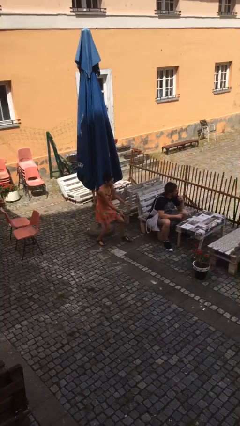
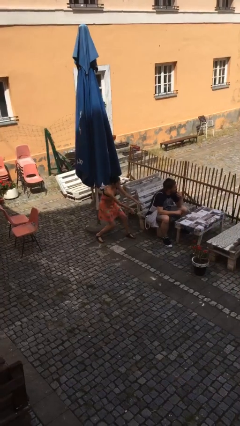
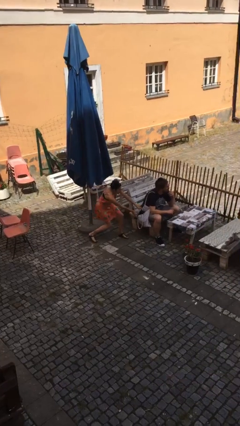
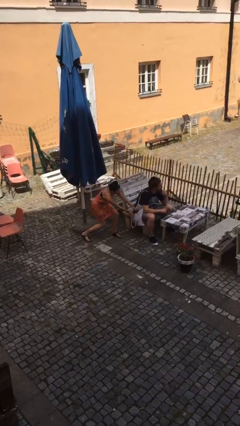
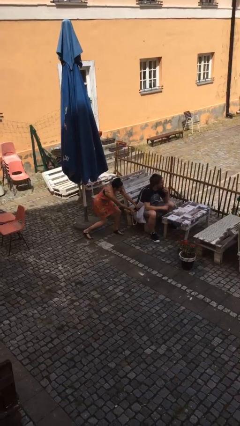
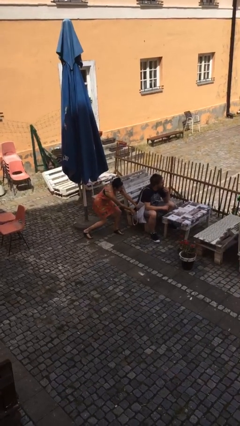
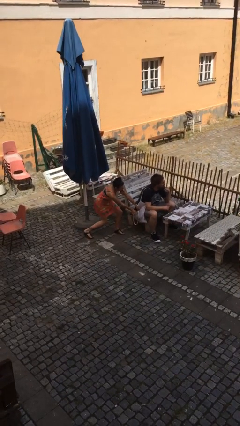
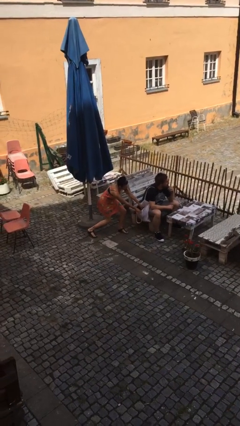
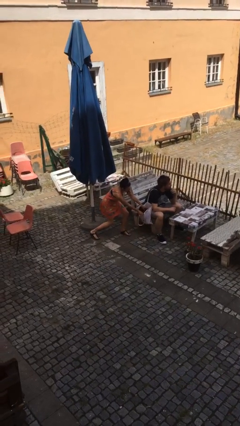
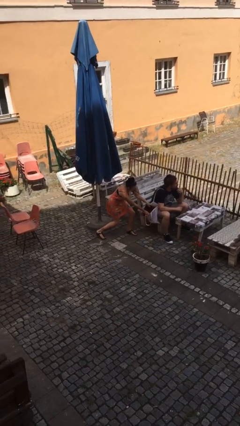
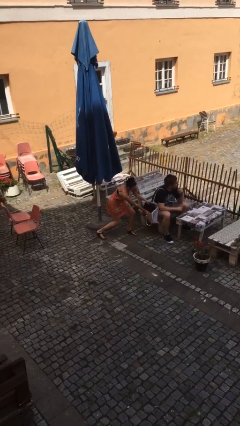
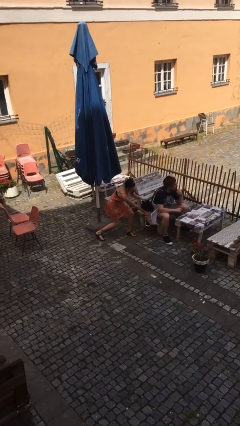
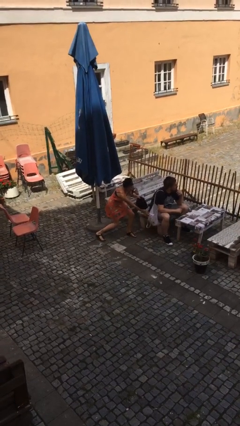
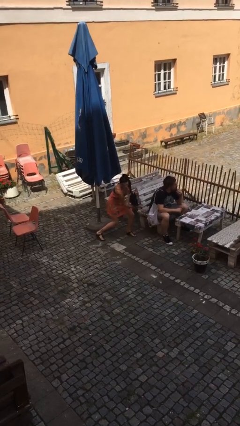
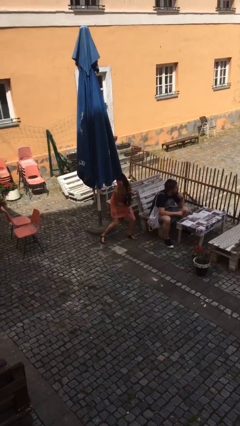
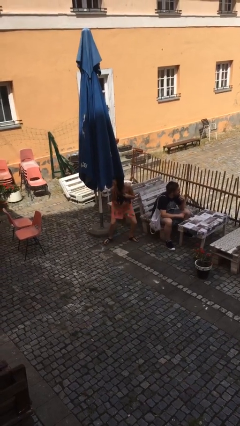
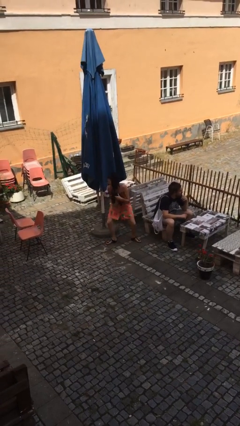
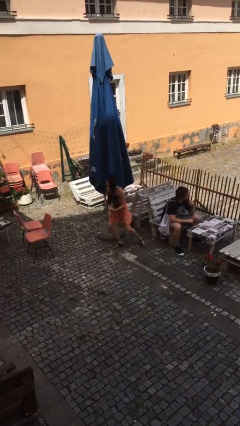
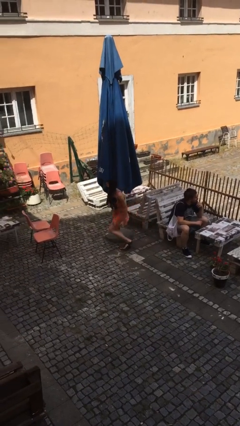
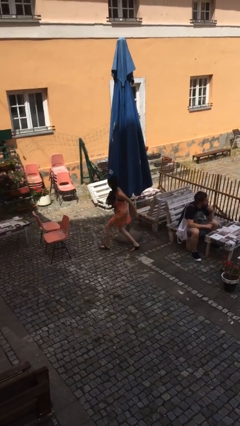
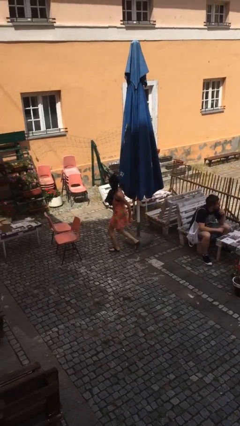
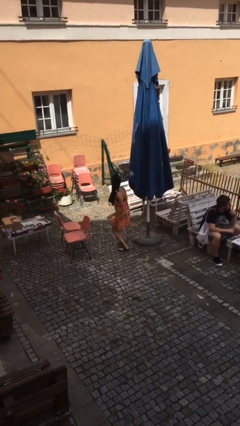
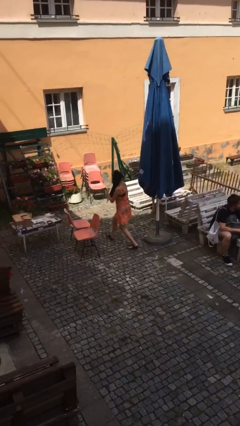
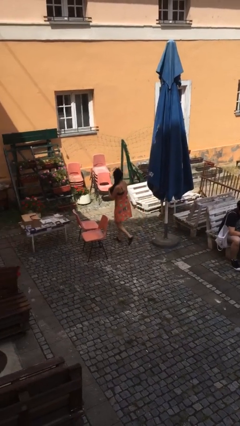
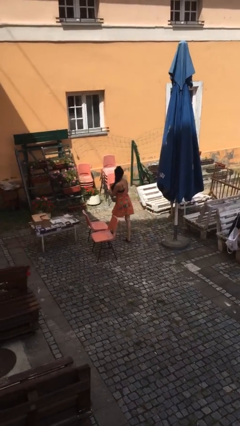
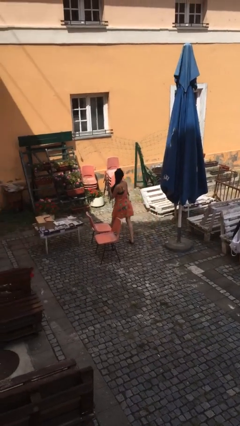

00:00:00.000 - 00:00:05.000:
person steals object from person

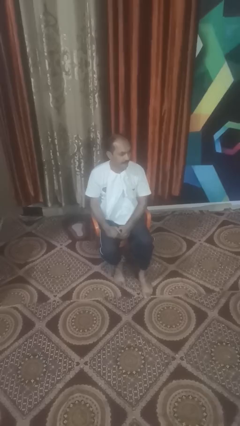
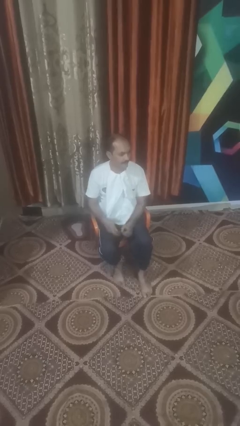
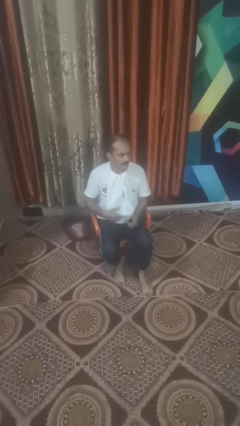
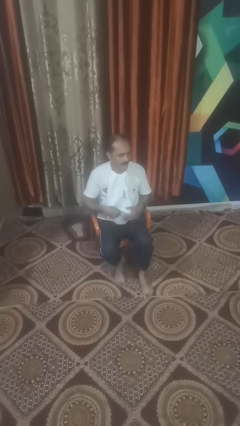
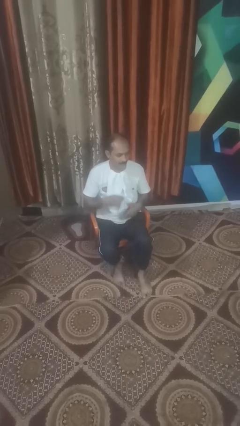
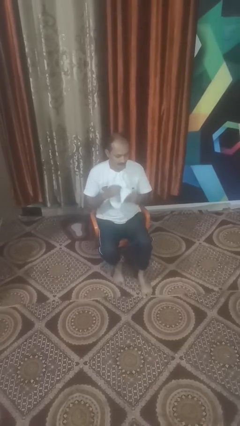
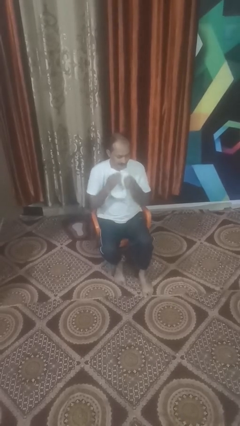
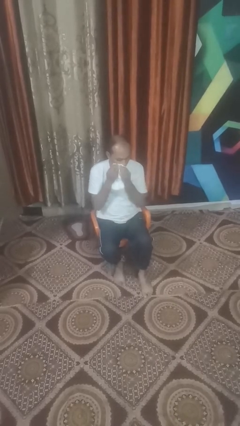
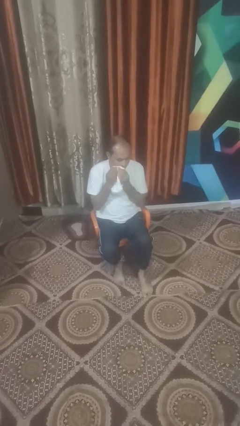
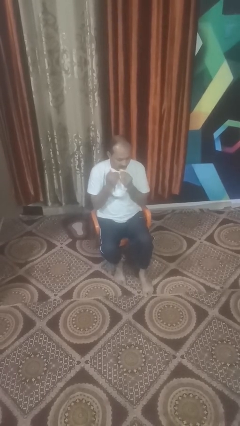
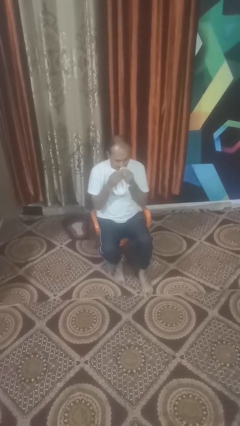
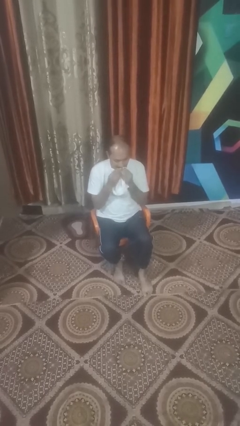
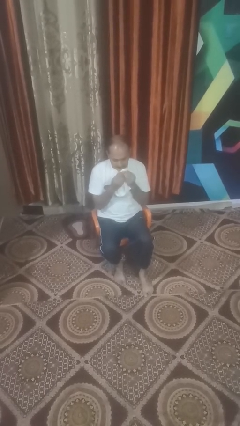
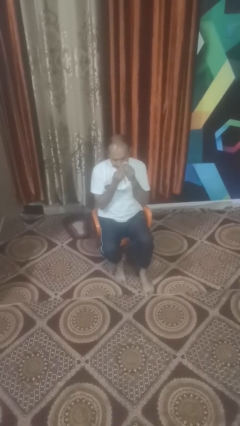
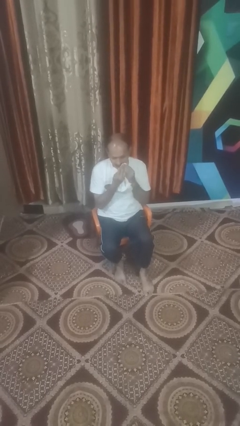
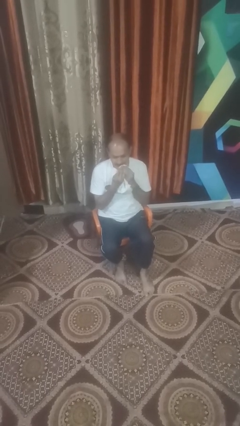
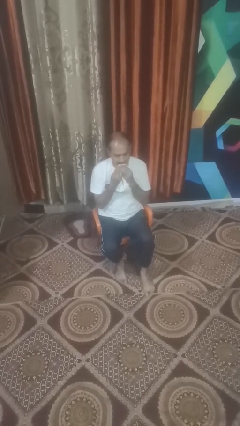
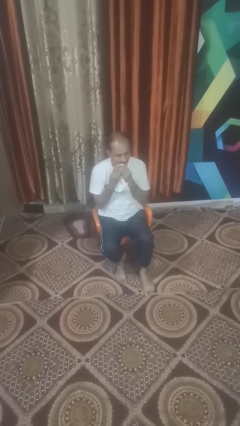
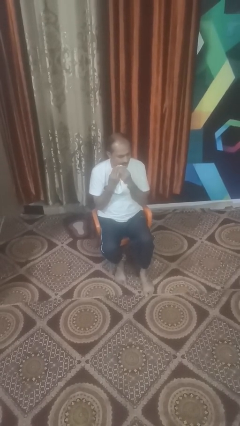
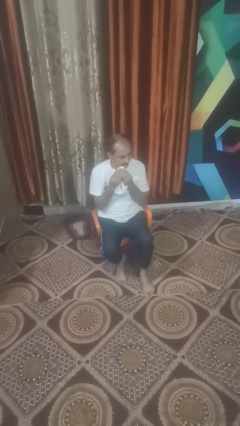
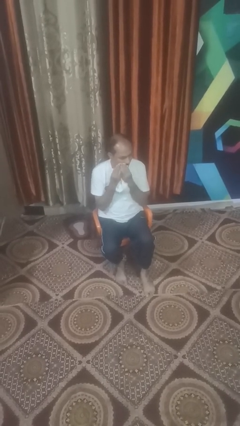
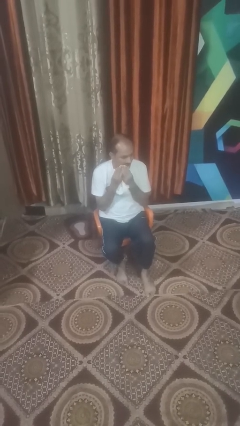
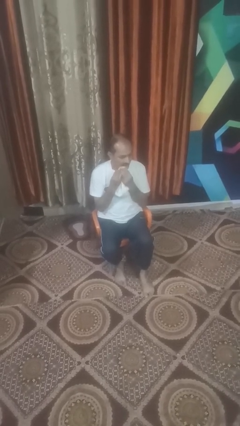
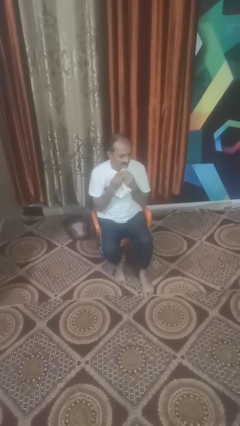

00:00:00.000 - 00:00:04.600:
person wipes mouth with napkin

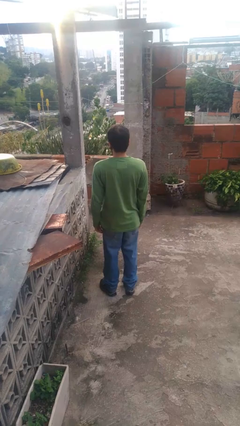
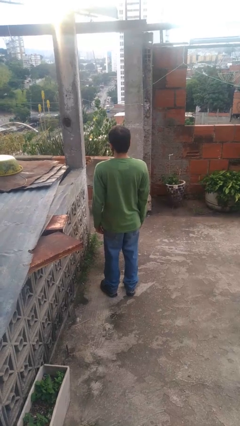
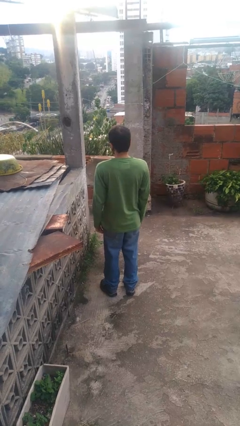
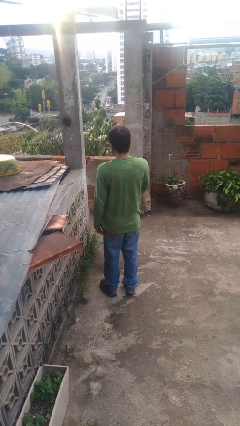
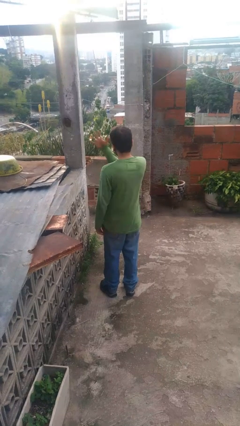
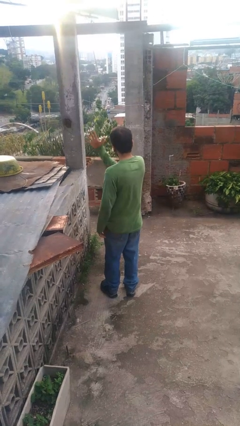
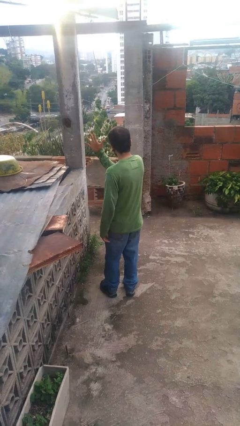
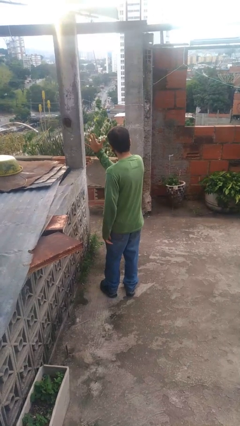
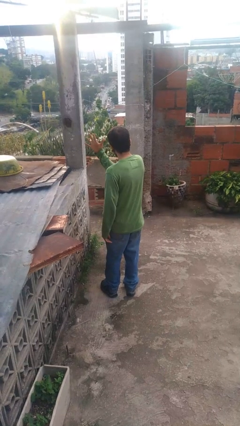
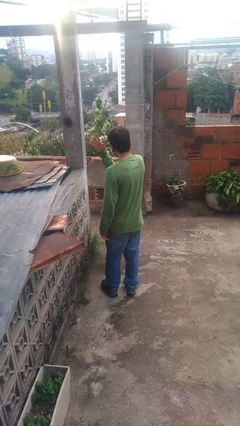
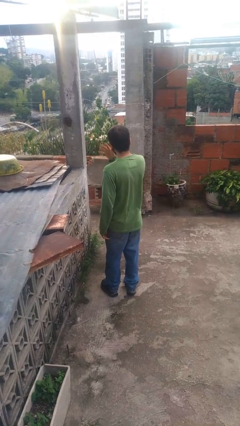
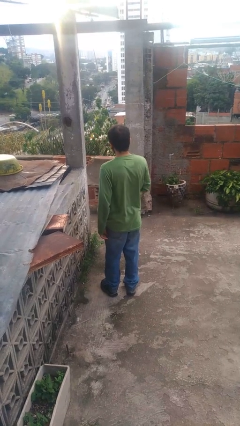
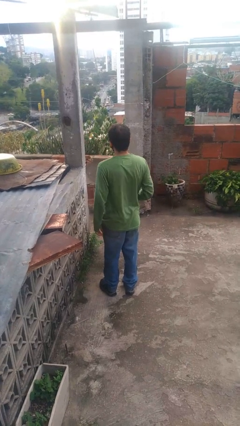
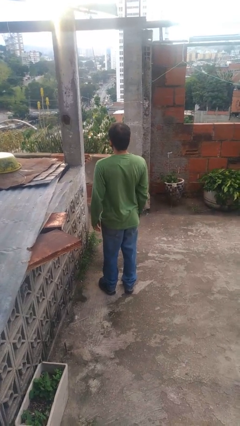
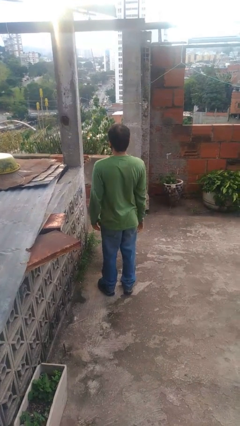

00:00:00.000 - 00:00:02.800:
person gestures number five

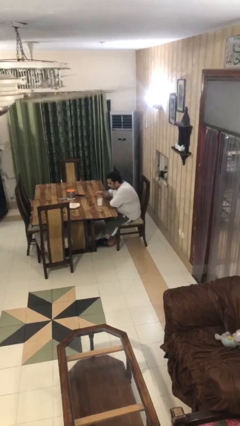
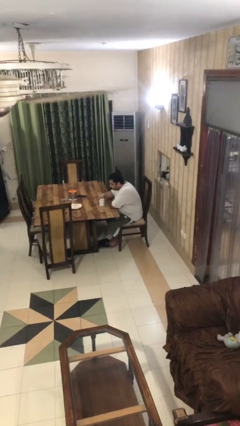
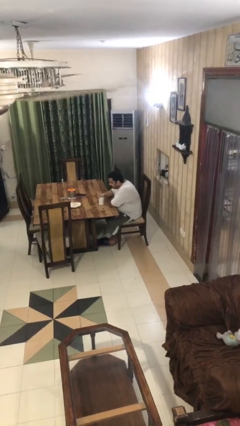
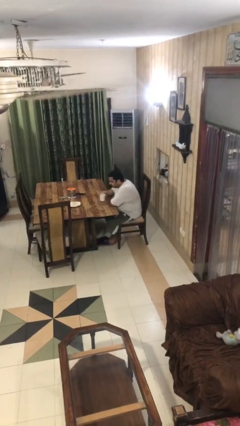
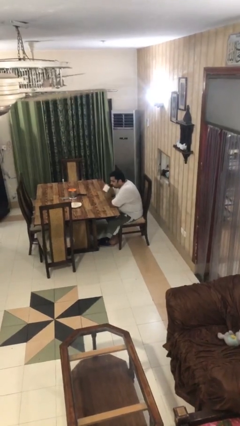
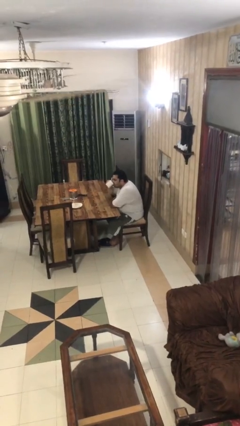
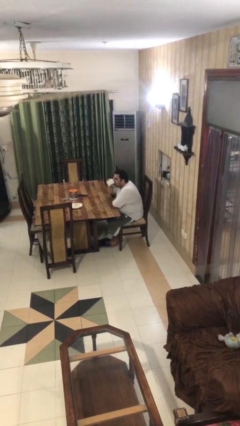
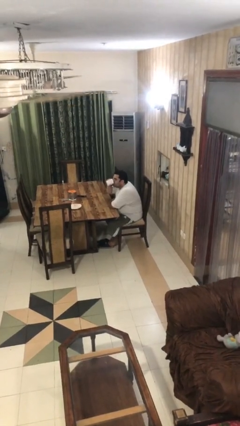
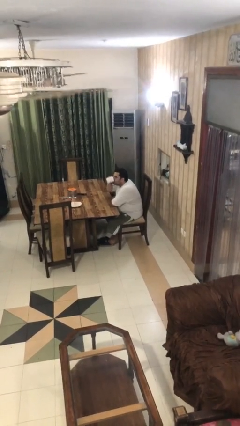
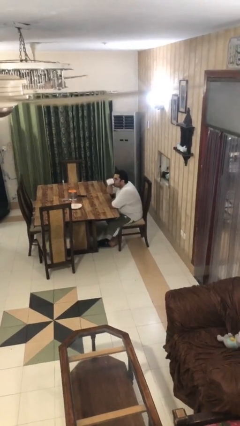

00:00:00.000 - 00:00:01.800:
person drinks from mug

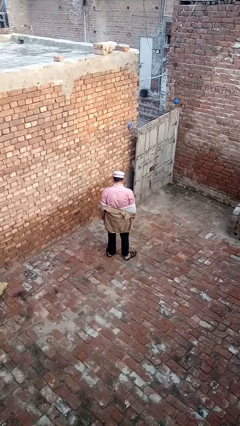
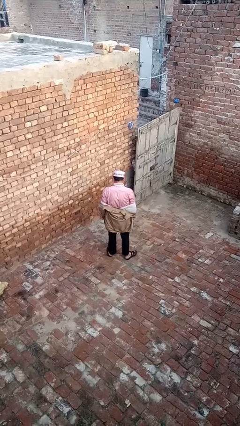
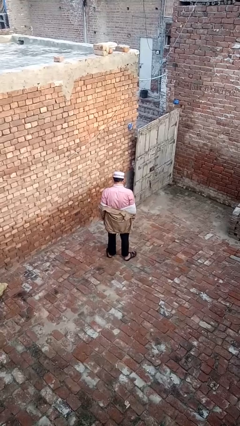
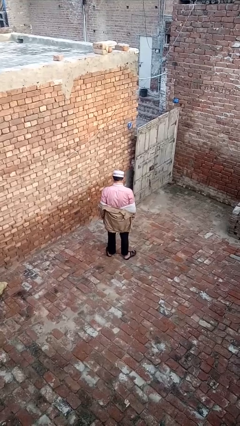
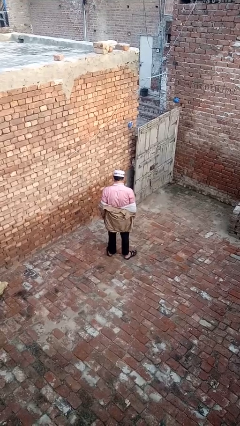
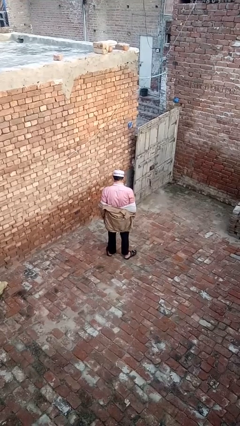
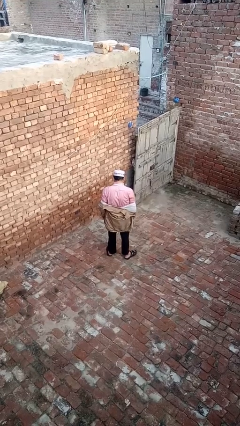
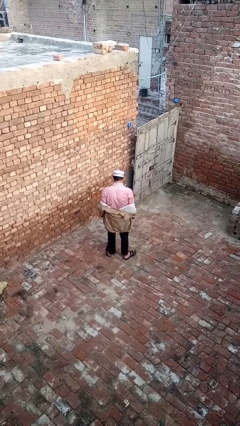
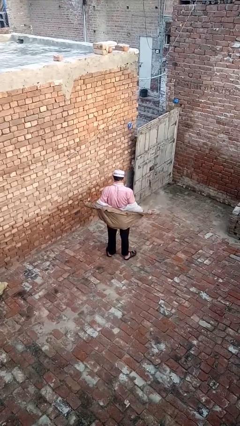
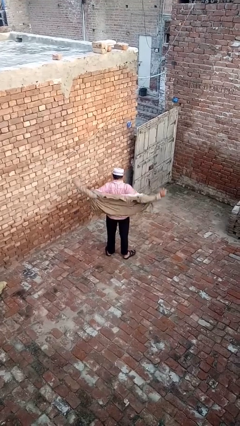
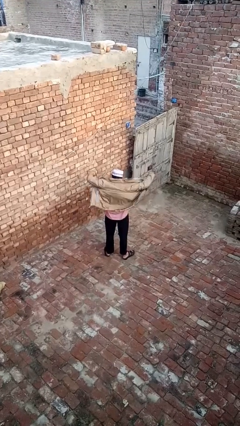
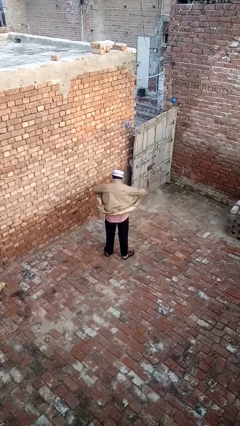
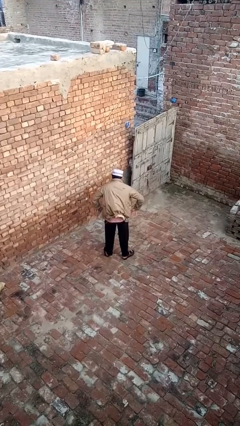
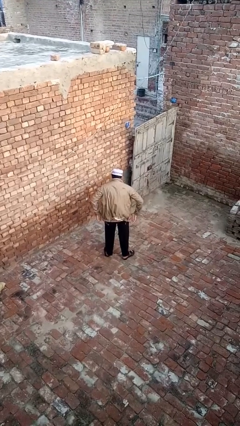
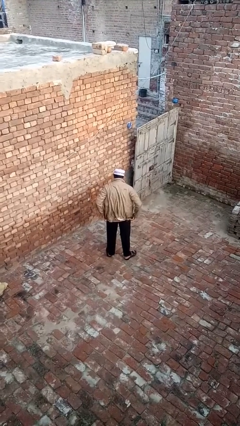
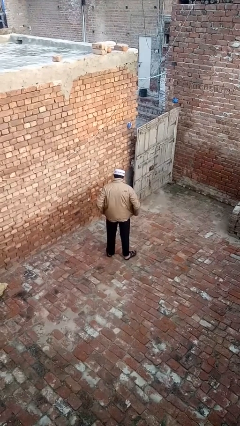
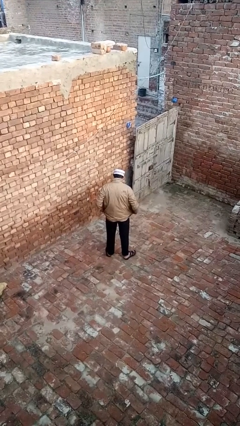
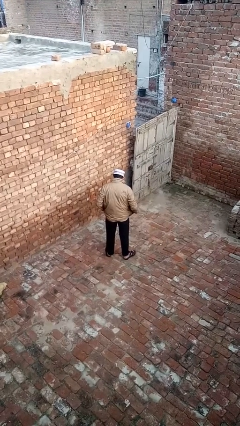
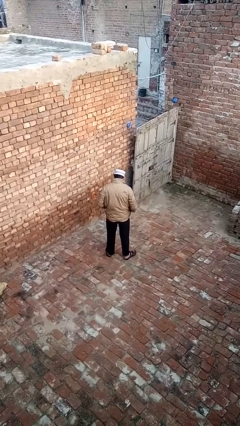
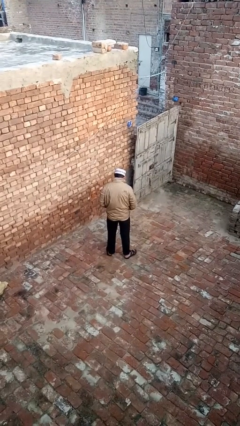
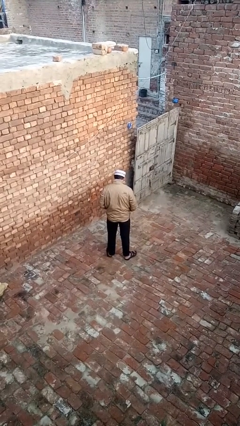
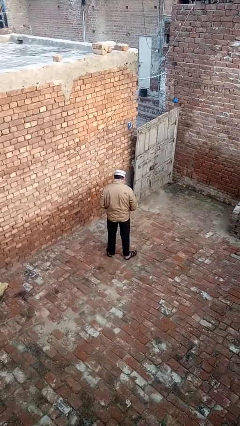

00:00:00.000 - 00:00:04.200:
person puts on jacket
